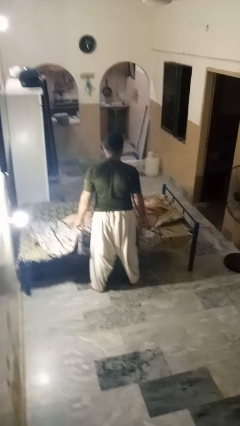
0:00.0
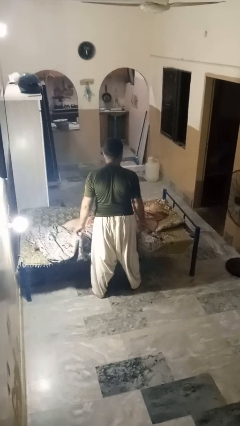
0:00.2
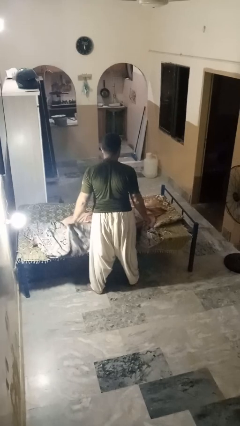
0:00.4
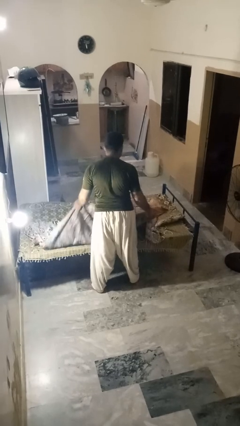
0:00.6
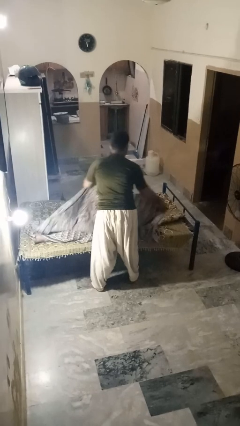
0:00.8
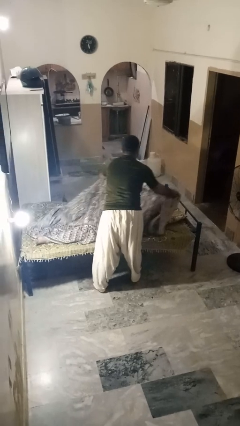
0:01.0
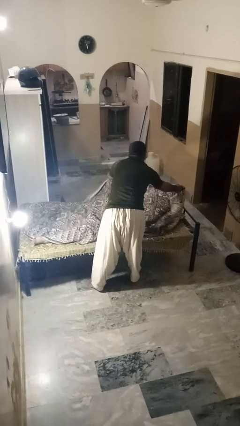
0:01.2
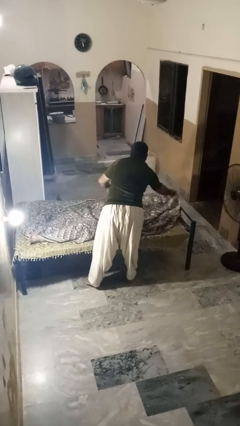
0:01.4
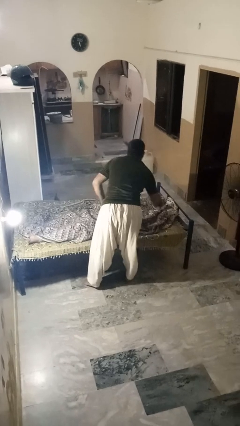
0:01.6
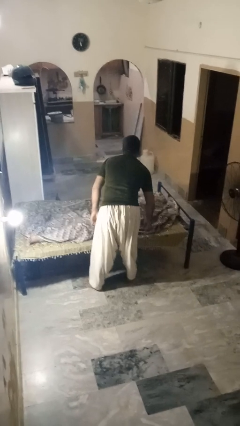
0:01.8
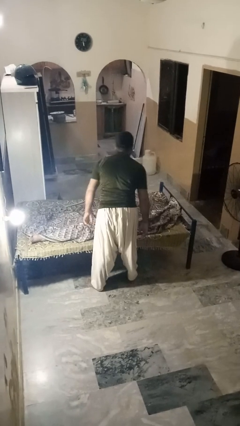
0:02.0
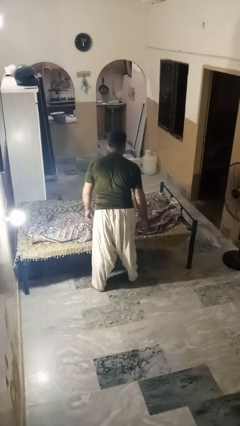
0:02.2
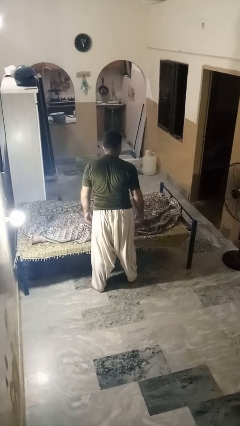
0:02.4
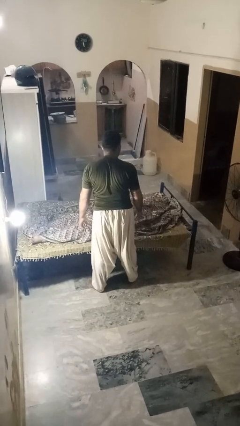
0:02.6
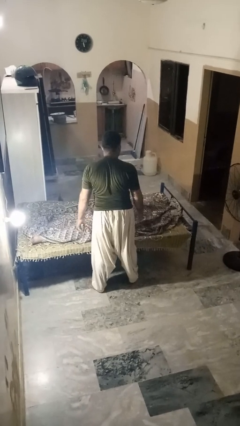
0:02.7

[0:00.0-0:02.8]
person covers friend with blanket

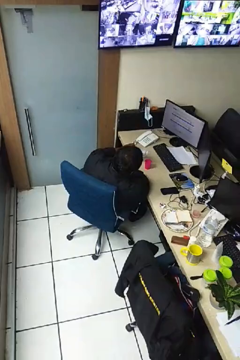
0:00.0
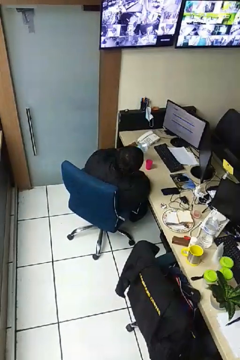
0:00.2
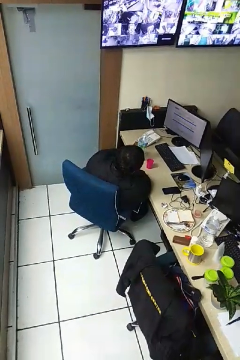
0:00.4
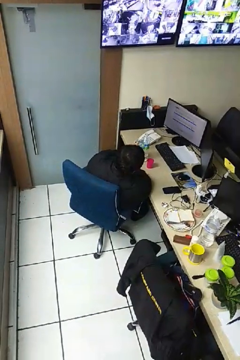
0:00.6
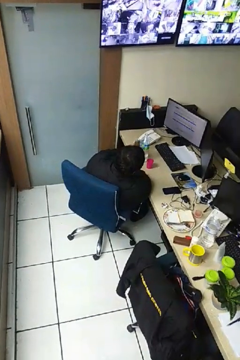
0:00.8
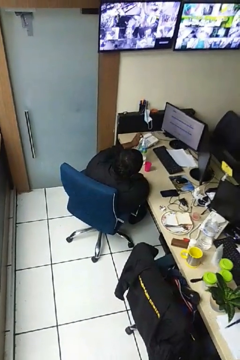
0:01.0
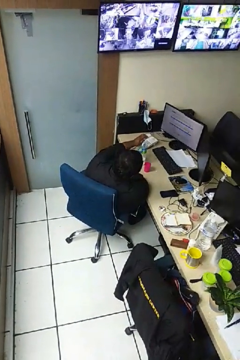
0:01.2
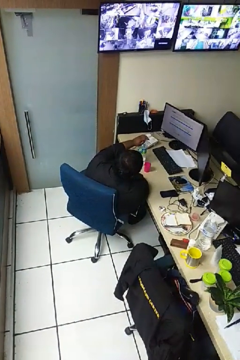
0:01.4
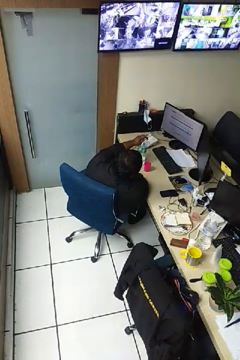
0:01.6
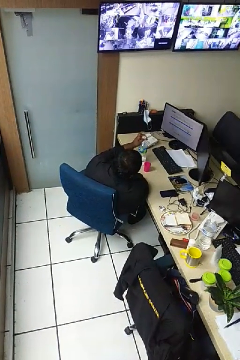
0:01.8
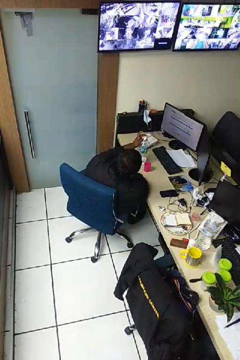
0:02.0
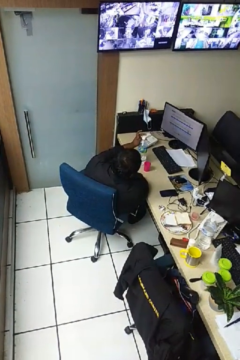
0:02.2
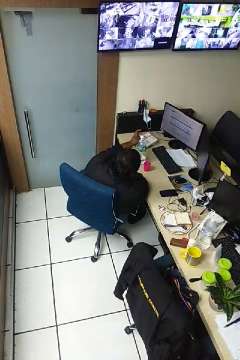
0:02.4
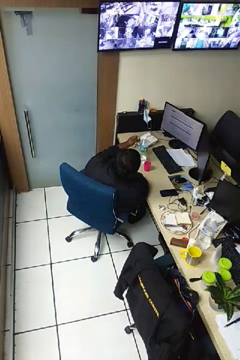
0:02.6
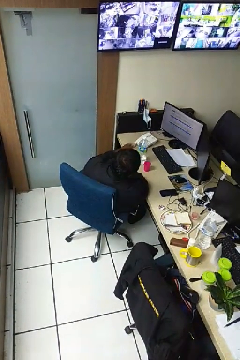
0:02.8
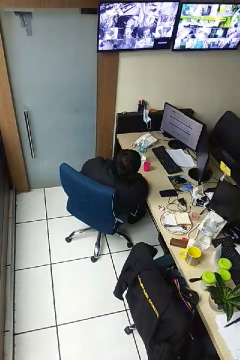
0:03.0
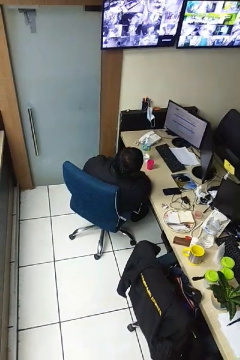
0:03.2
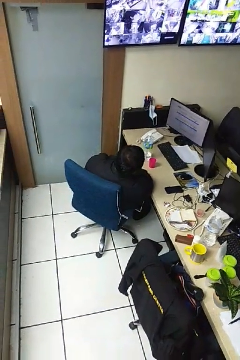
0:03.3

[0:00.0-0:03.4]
person screws lid to bottle

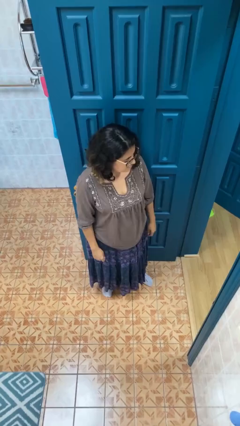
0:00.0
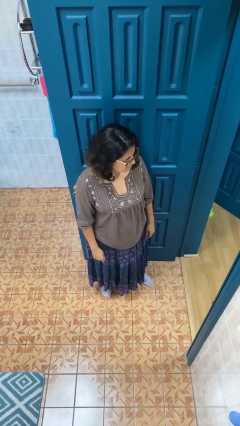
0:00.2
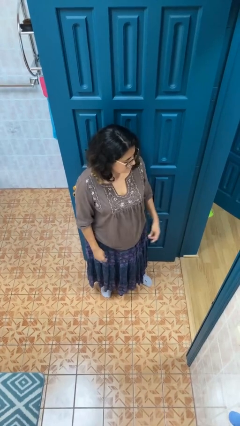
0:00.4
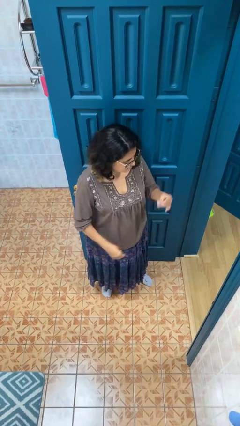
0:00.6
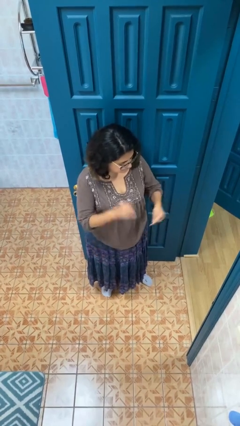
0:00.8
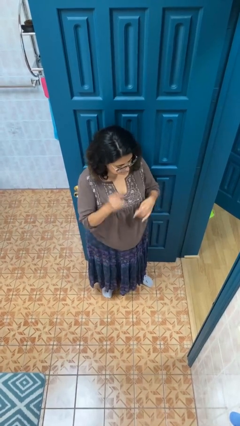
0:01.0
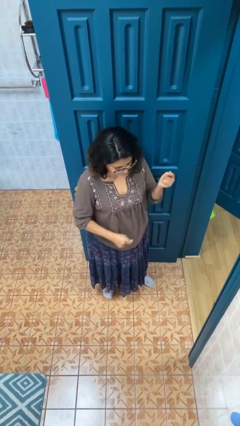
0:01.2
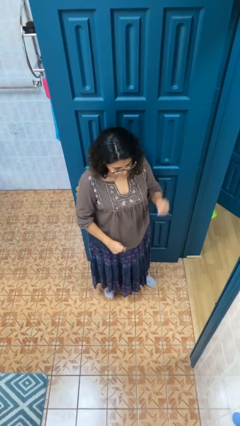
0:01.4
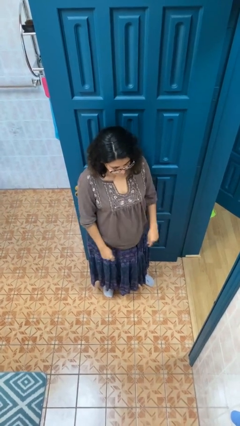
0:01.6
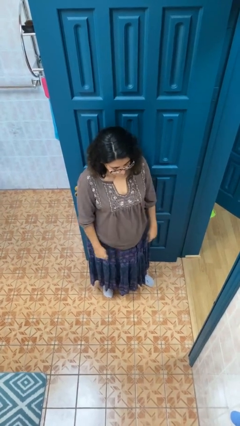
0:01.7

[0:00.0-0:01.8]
person snaps fingers

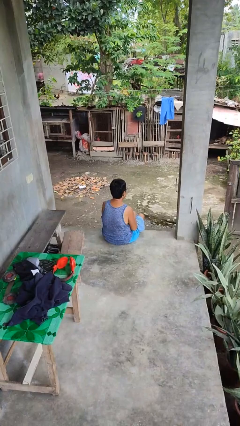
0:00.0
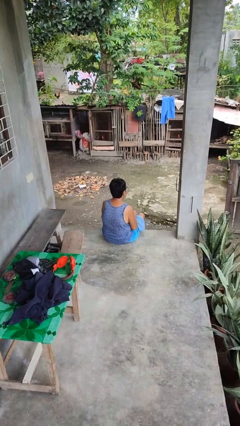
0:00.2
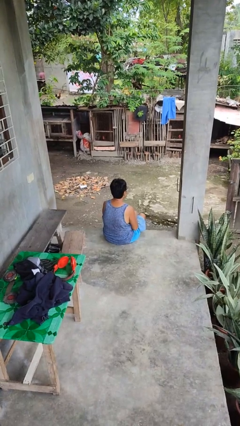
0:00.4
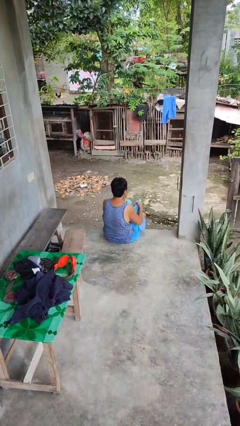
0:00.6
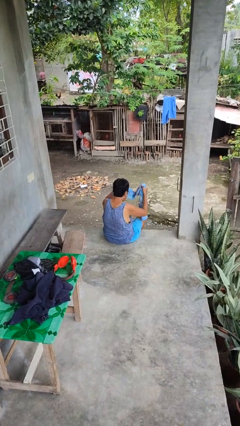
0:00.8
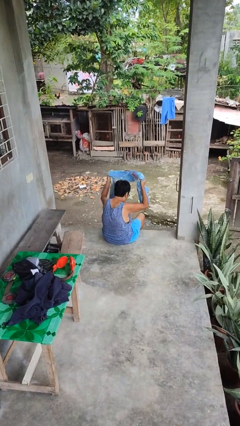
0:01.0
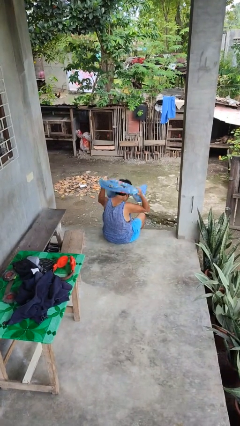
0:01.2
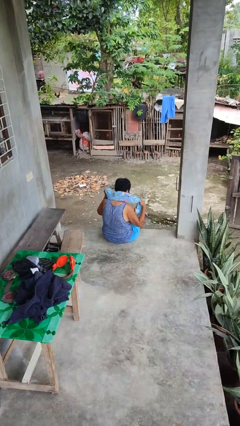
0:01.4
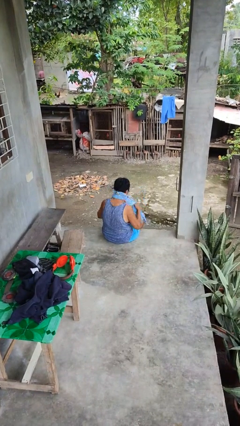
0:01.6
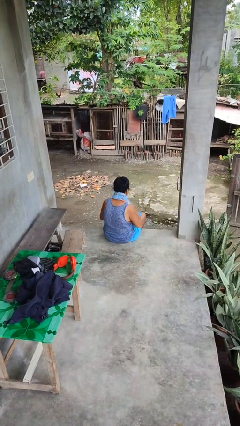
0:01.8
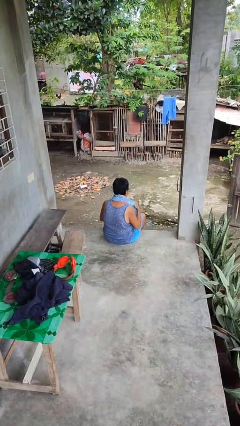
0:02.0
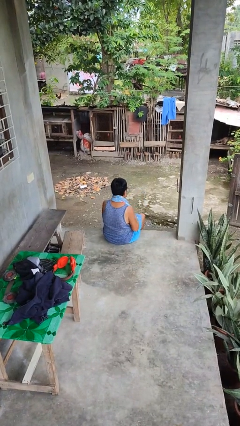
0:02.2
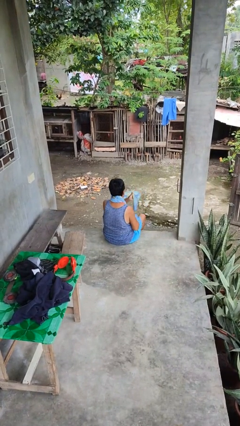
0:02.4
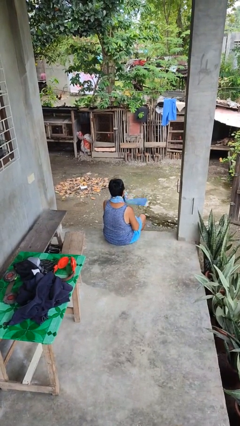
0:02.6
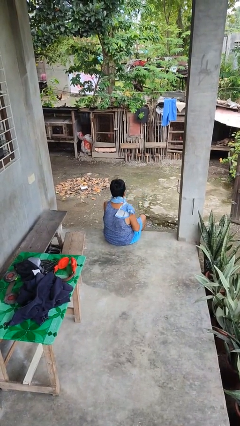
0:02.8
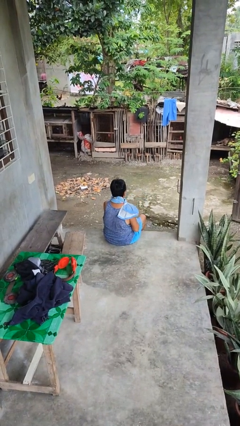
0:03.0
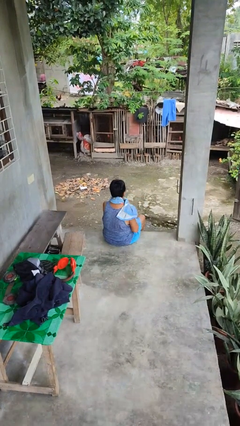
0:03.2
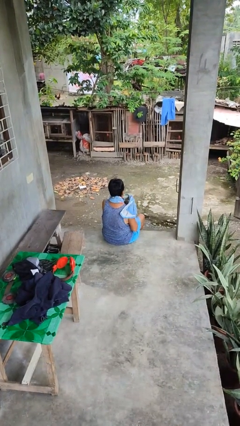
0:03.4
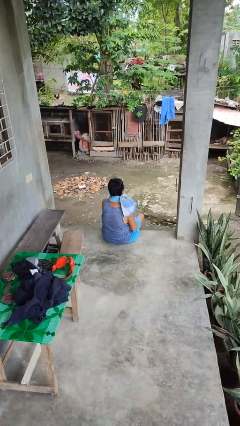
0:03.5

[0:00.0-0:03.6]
person puts on scarf

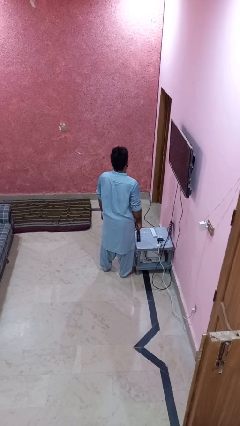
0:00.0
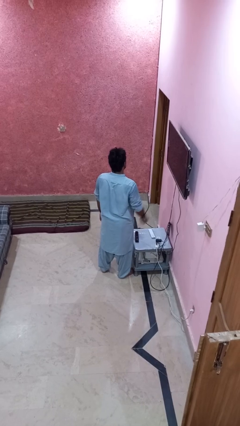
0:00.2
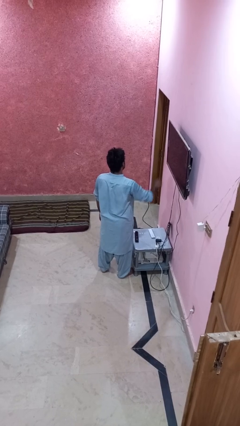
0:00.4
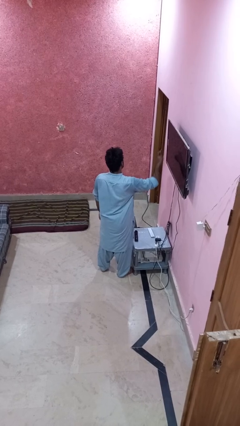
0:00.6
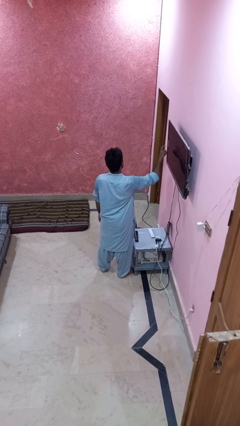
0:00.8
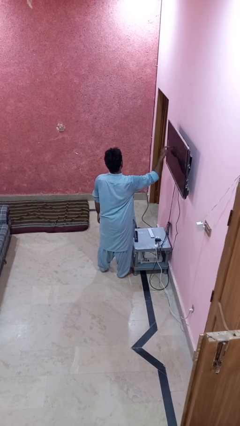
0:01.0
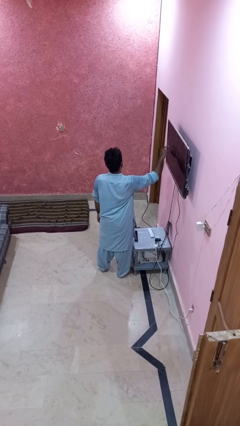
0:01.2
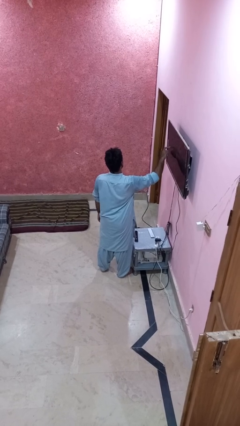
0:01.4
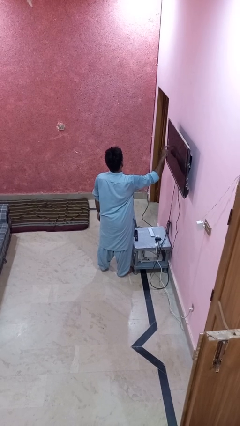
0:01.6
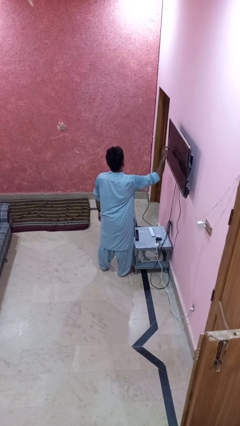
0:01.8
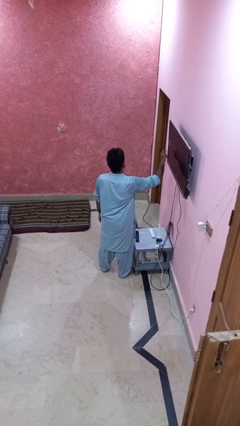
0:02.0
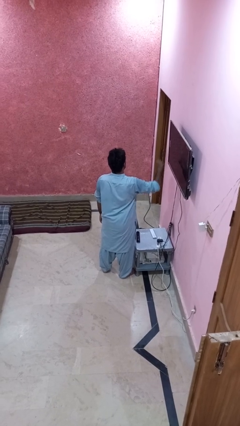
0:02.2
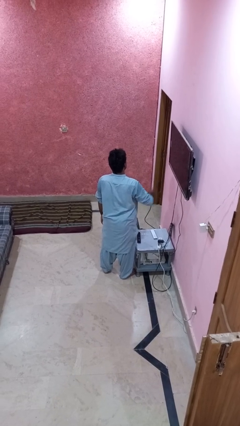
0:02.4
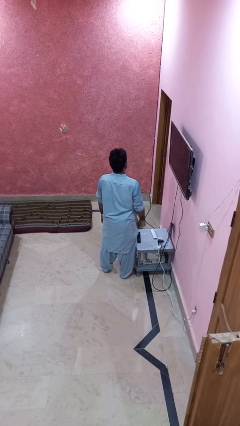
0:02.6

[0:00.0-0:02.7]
person taps object with finger

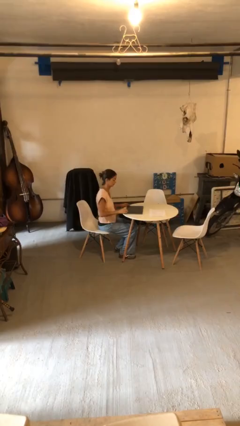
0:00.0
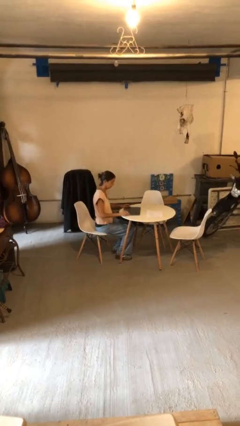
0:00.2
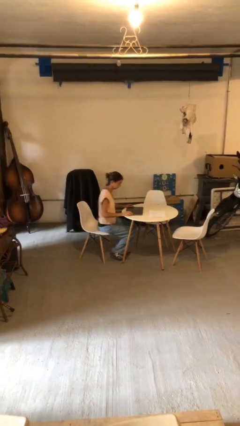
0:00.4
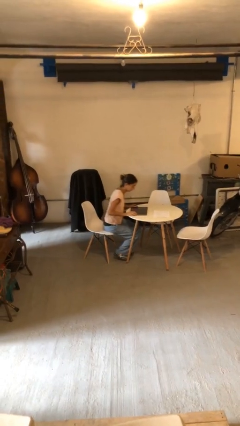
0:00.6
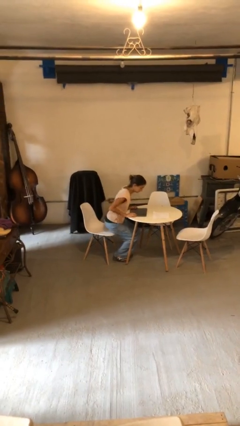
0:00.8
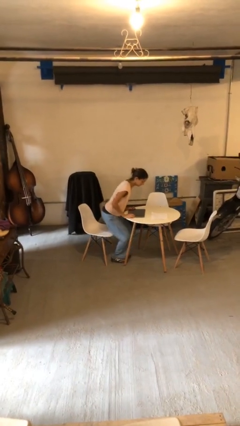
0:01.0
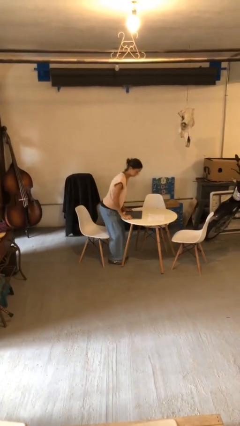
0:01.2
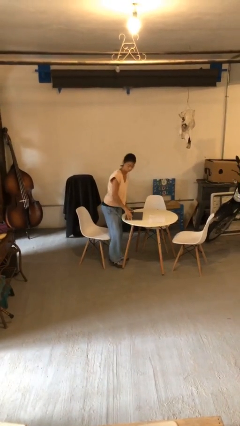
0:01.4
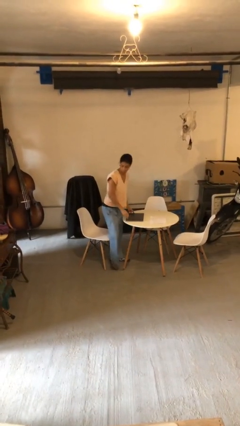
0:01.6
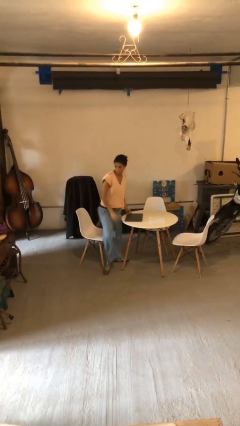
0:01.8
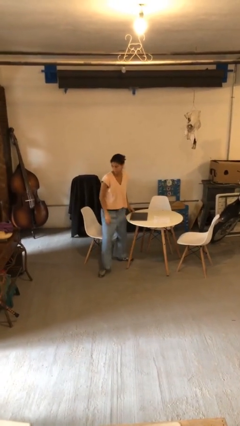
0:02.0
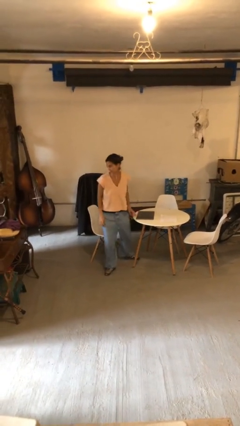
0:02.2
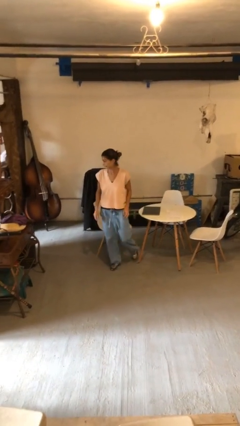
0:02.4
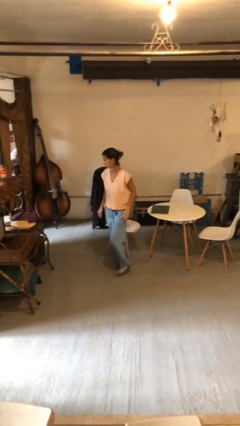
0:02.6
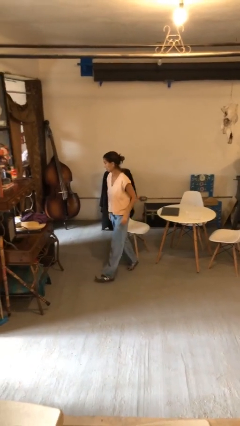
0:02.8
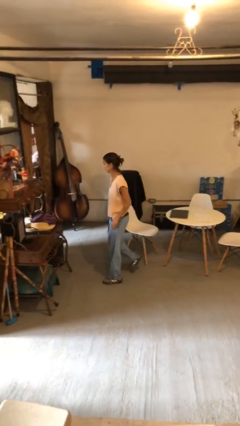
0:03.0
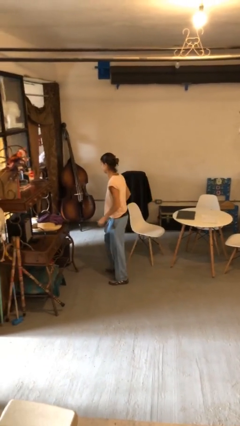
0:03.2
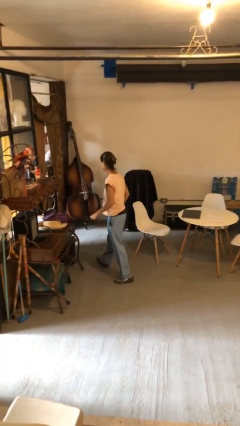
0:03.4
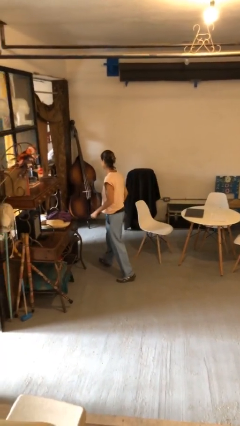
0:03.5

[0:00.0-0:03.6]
person stands up

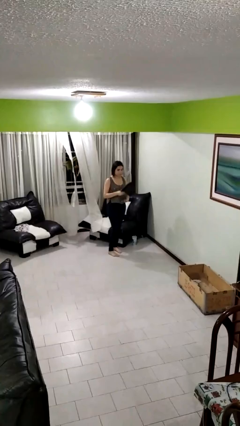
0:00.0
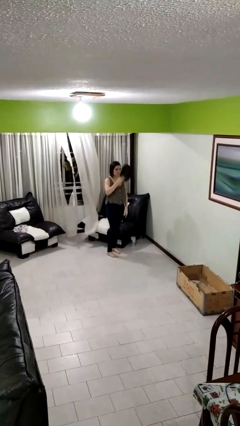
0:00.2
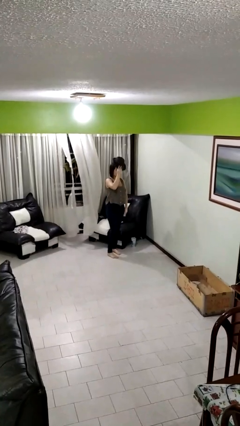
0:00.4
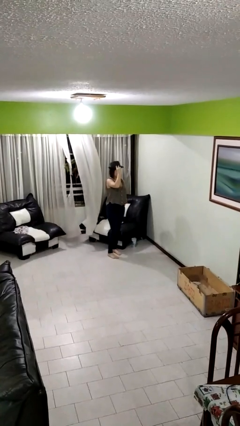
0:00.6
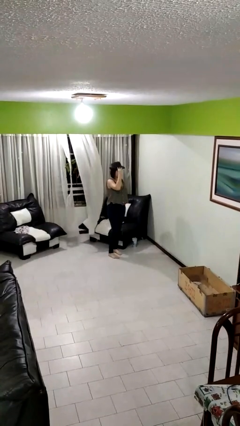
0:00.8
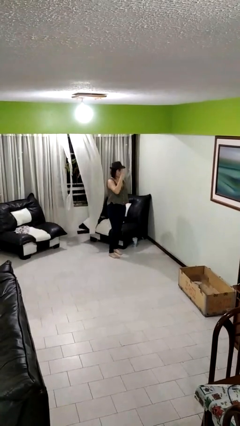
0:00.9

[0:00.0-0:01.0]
person puts on hat
